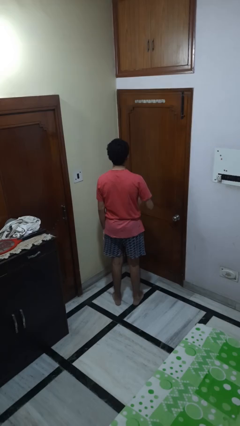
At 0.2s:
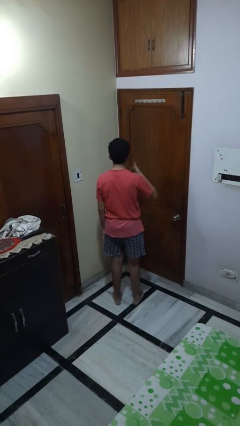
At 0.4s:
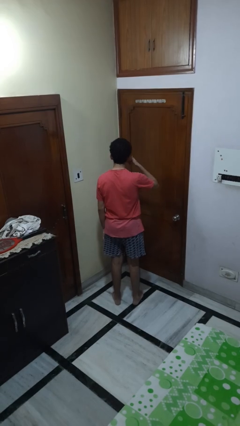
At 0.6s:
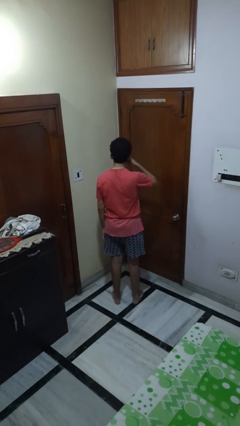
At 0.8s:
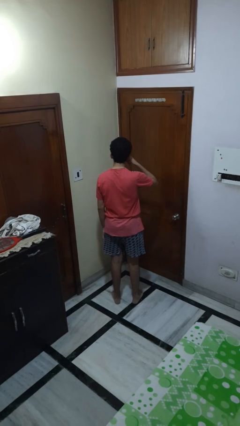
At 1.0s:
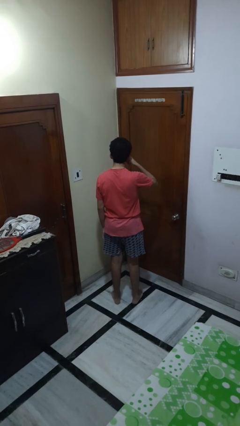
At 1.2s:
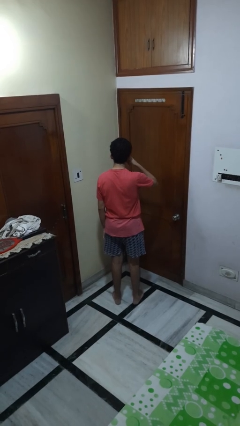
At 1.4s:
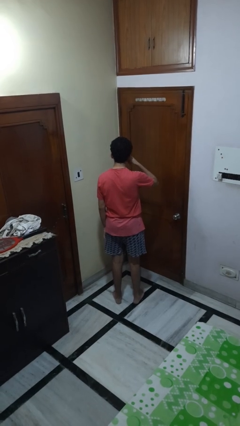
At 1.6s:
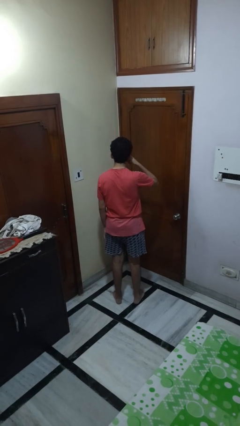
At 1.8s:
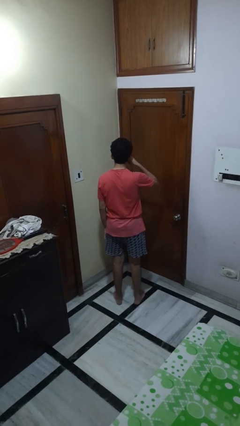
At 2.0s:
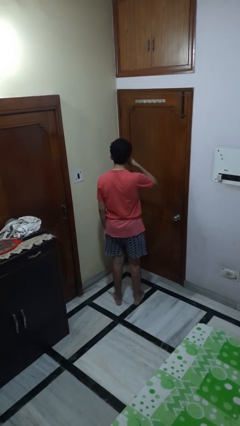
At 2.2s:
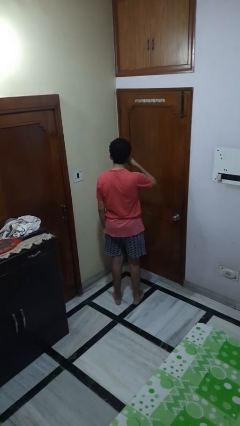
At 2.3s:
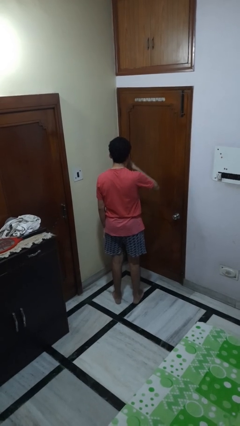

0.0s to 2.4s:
person gestures call me

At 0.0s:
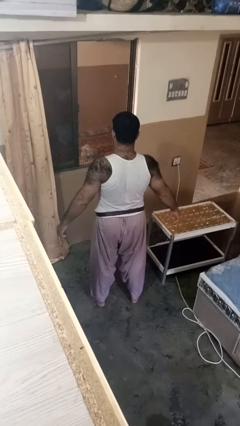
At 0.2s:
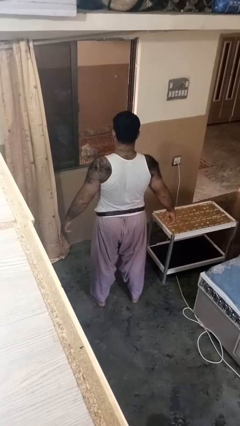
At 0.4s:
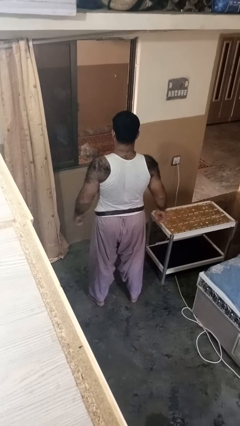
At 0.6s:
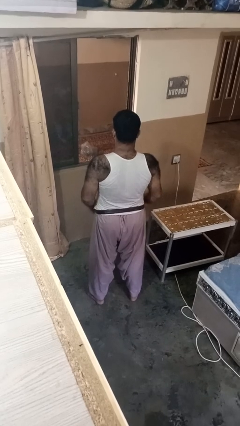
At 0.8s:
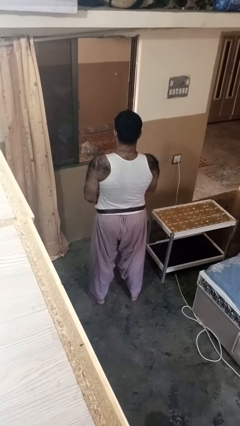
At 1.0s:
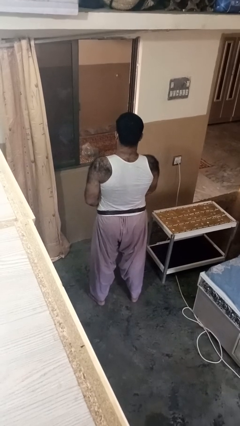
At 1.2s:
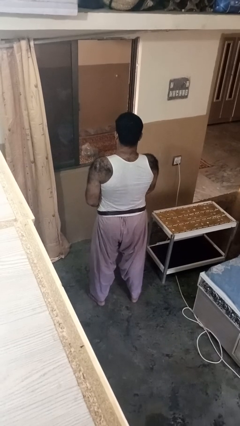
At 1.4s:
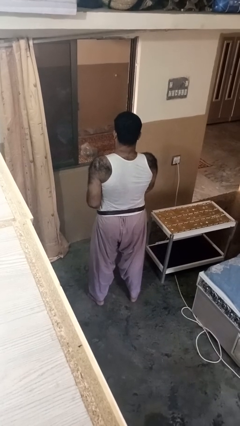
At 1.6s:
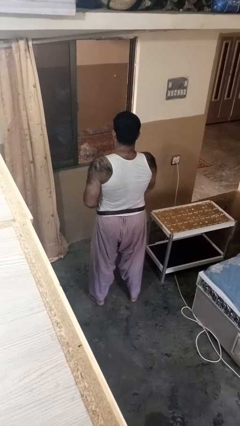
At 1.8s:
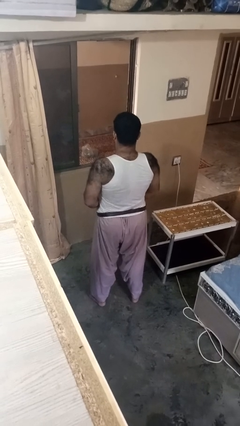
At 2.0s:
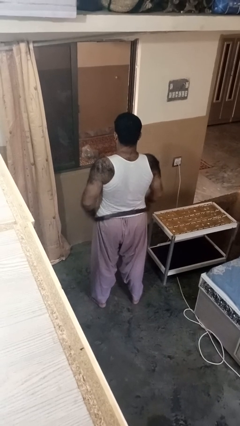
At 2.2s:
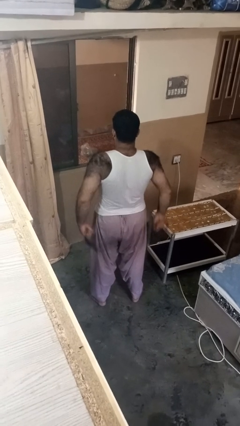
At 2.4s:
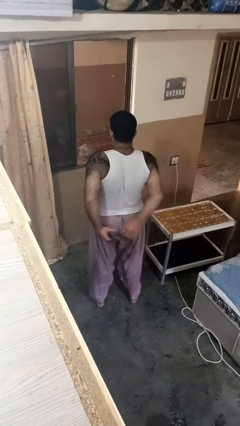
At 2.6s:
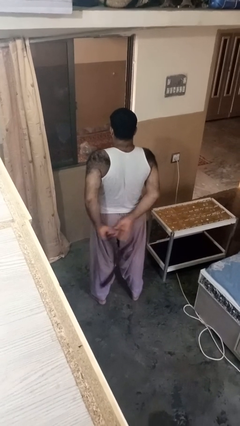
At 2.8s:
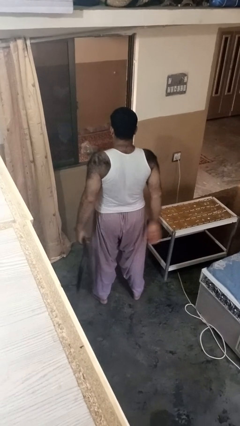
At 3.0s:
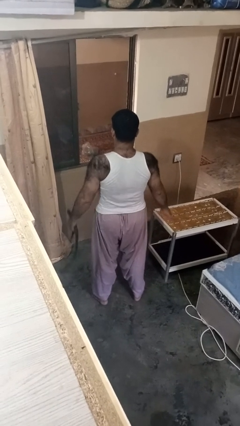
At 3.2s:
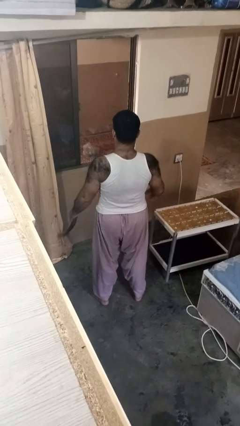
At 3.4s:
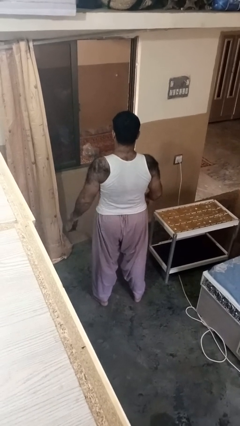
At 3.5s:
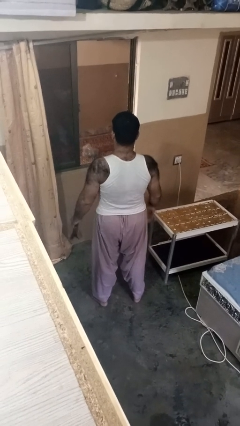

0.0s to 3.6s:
person takes off belt

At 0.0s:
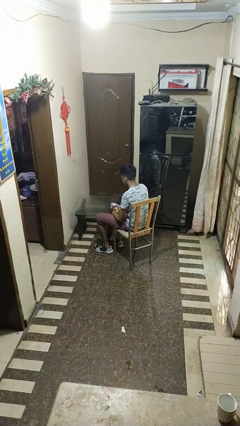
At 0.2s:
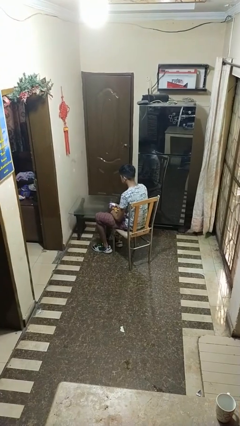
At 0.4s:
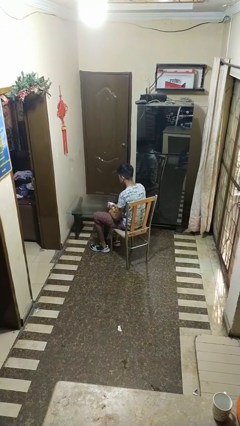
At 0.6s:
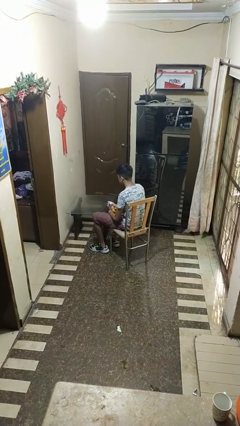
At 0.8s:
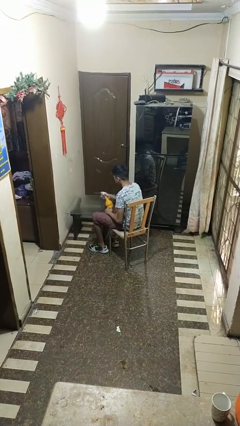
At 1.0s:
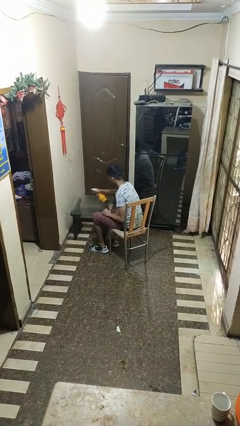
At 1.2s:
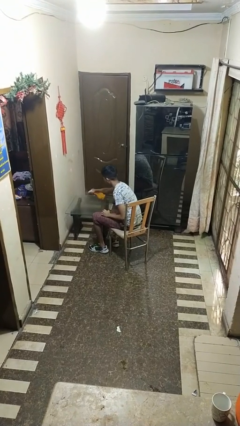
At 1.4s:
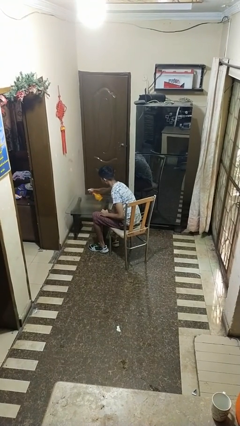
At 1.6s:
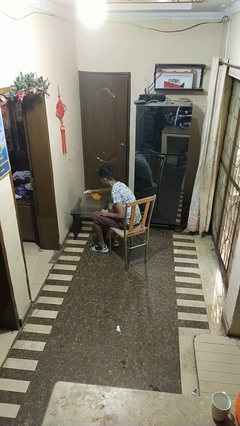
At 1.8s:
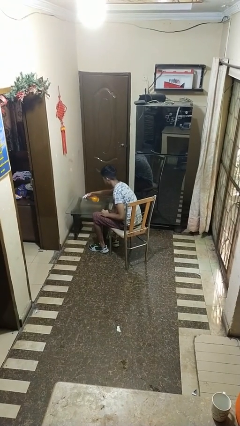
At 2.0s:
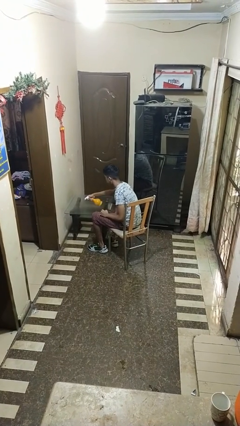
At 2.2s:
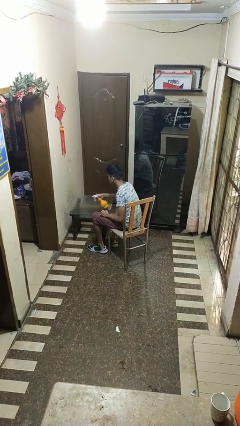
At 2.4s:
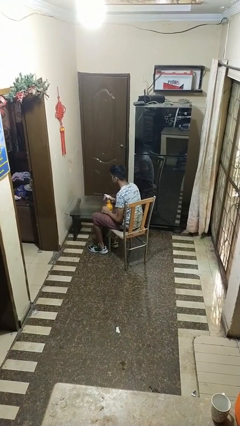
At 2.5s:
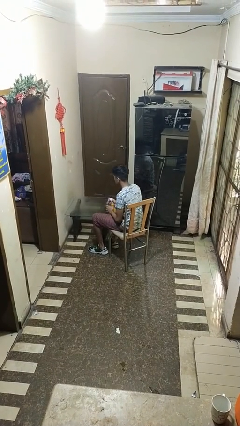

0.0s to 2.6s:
person sprays from bottle

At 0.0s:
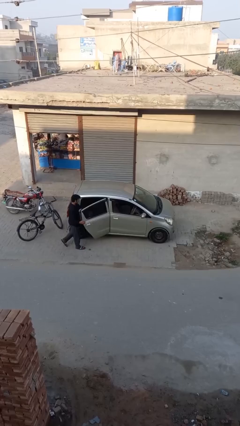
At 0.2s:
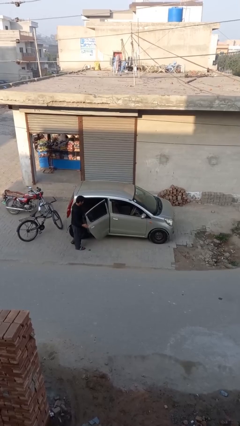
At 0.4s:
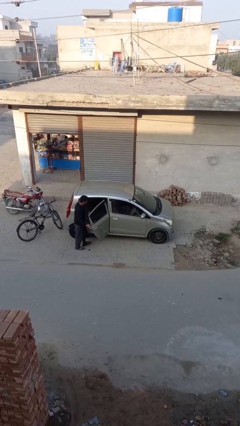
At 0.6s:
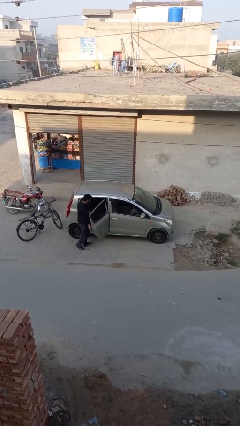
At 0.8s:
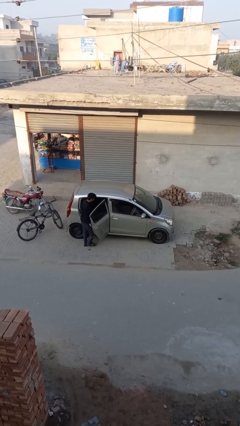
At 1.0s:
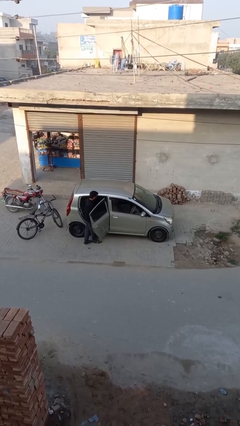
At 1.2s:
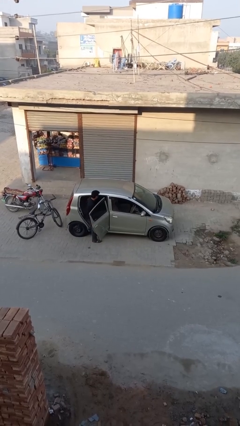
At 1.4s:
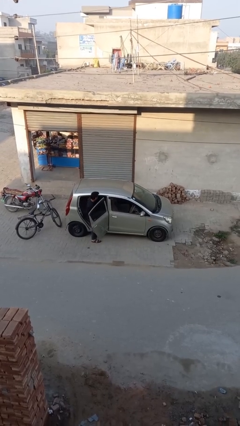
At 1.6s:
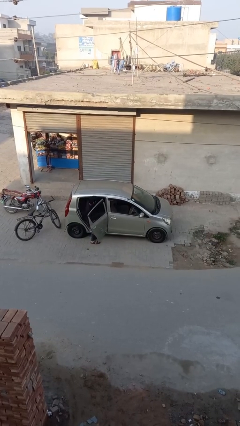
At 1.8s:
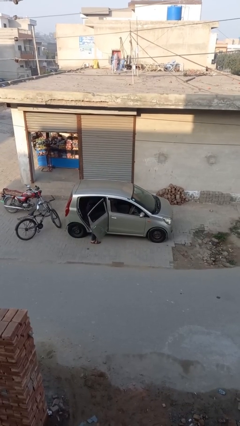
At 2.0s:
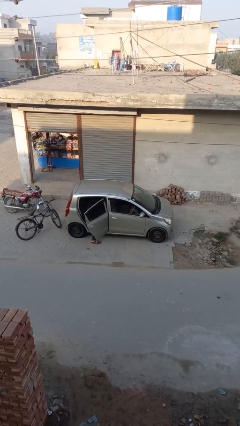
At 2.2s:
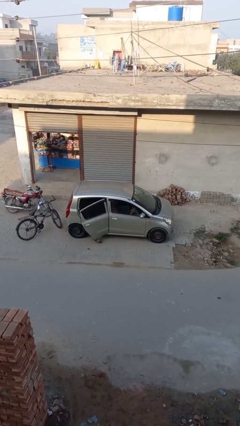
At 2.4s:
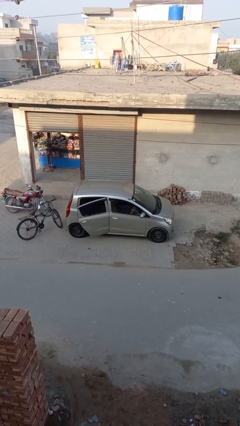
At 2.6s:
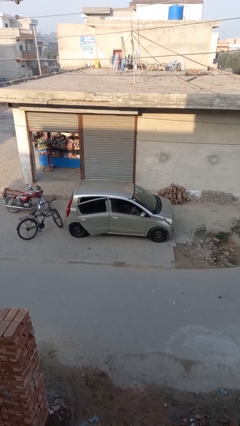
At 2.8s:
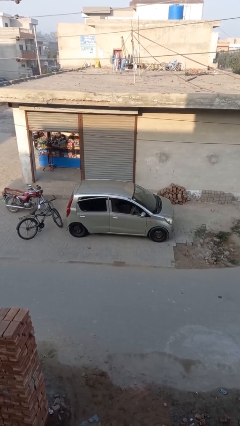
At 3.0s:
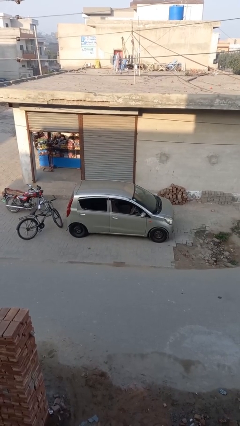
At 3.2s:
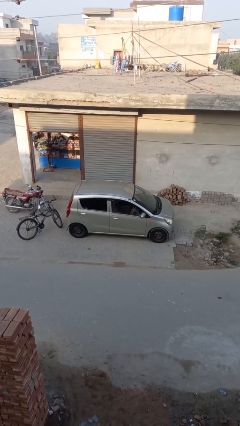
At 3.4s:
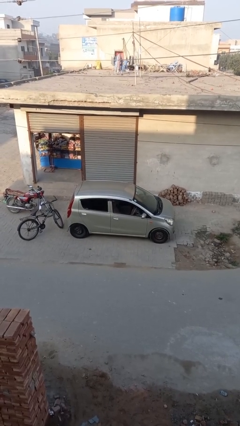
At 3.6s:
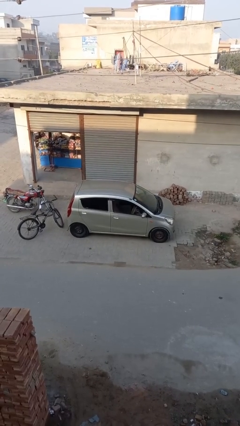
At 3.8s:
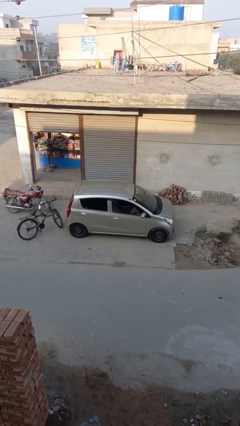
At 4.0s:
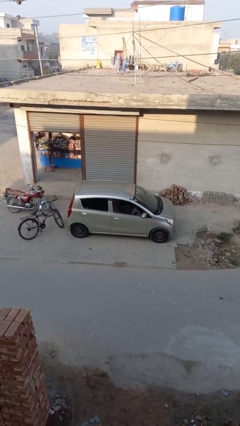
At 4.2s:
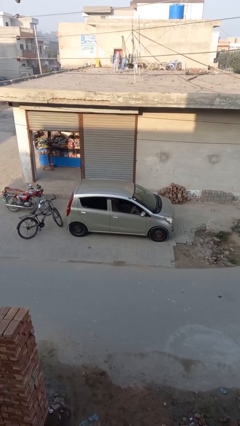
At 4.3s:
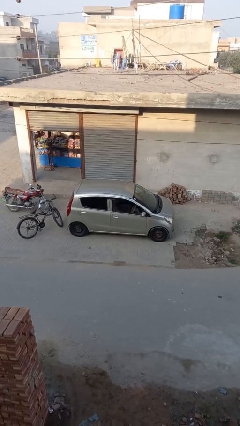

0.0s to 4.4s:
car picks up person

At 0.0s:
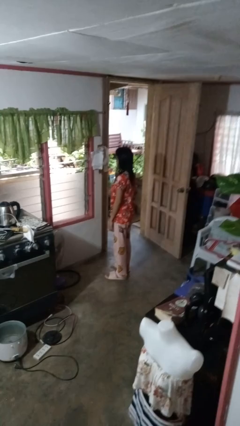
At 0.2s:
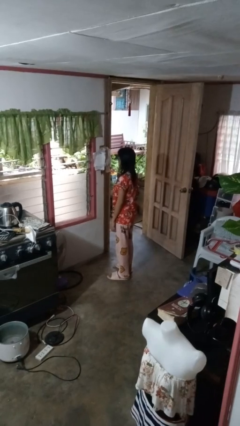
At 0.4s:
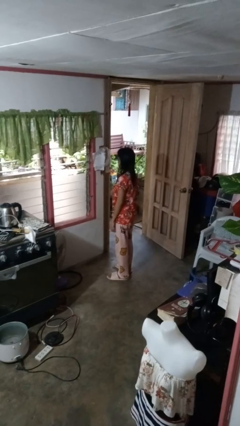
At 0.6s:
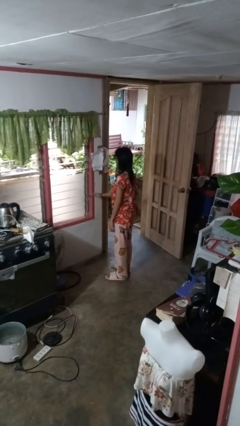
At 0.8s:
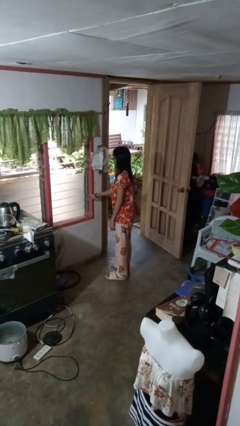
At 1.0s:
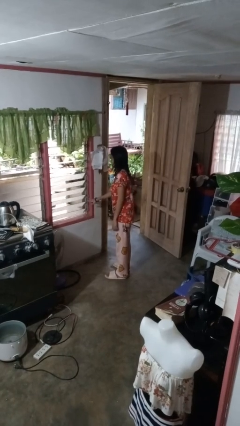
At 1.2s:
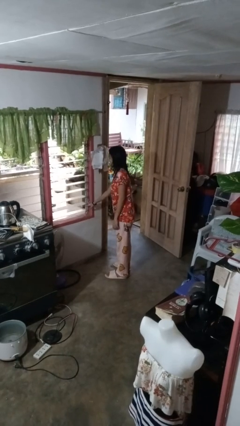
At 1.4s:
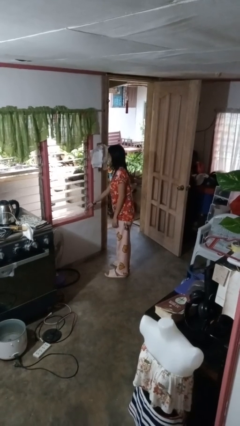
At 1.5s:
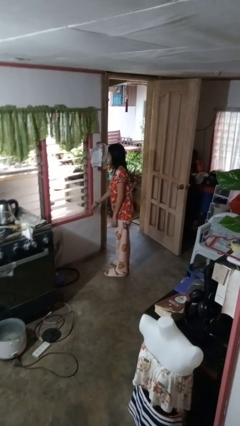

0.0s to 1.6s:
person opens home window

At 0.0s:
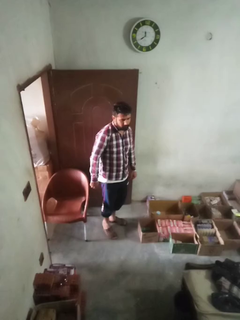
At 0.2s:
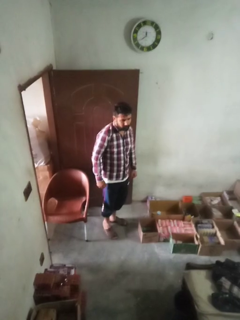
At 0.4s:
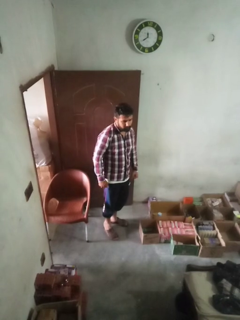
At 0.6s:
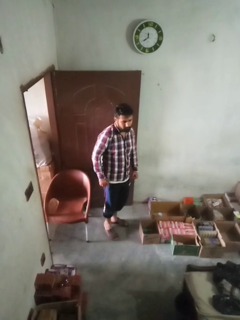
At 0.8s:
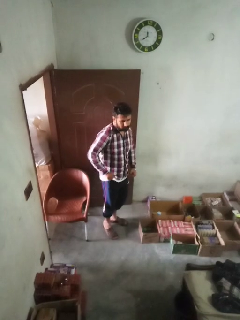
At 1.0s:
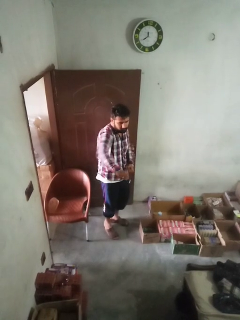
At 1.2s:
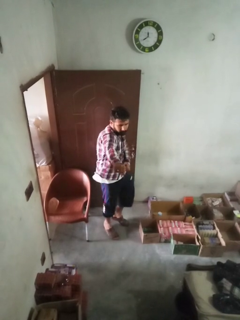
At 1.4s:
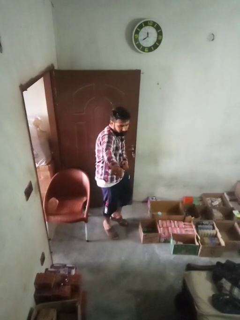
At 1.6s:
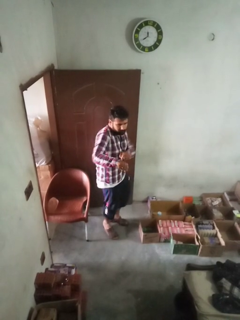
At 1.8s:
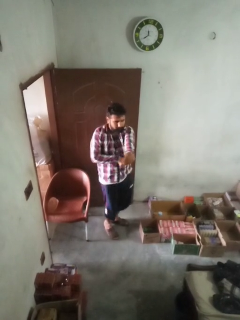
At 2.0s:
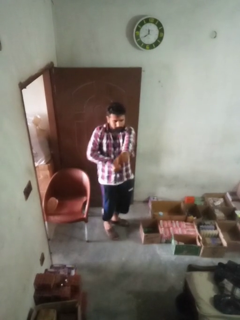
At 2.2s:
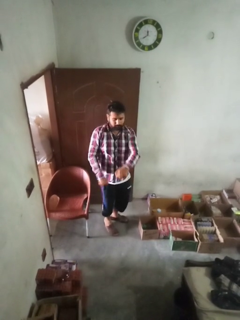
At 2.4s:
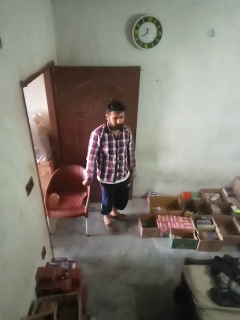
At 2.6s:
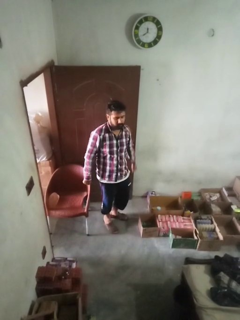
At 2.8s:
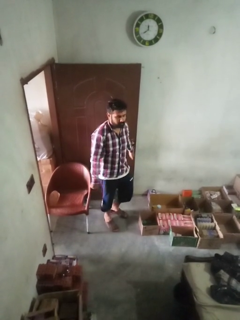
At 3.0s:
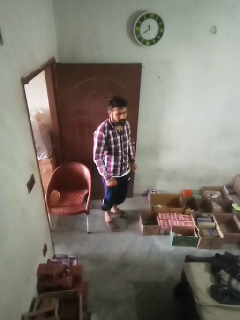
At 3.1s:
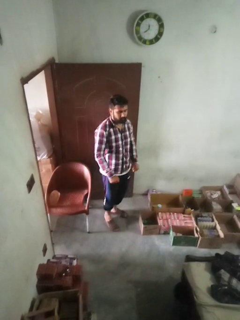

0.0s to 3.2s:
person karate chop
